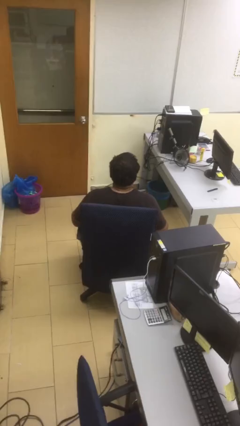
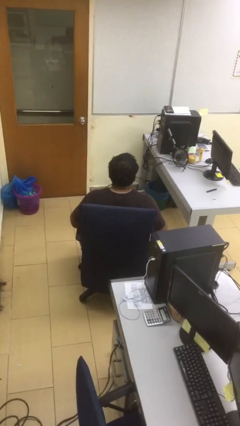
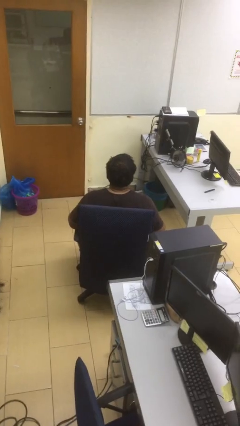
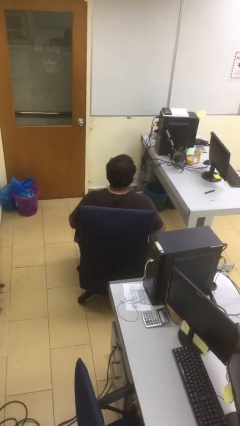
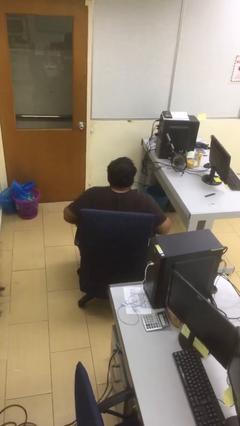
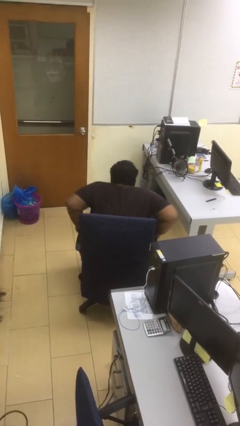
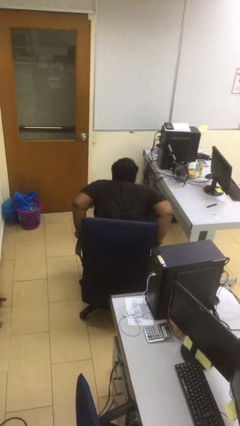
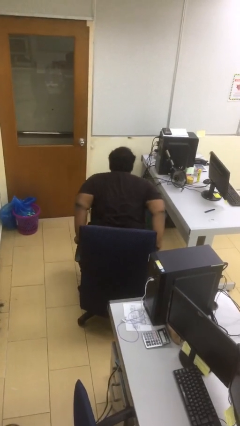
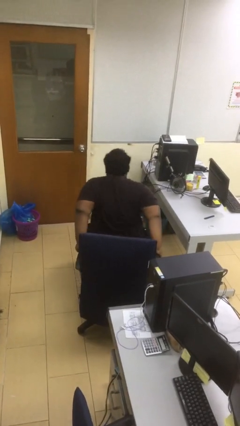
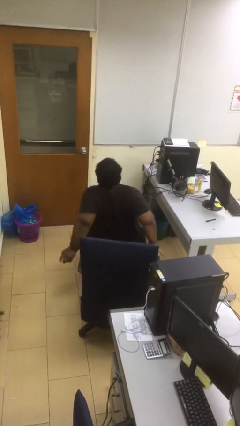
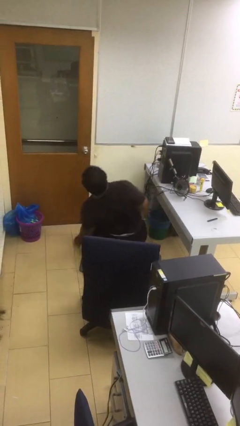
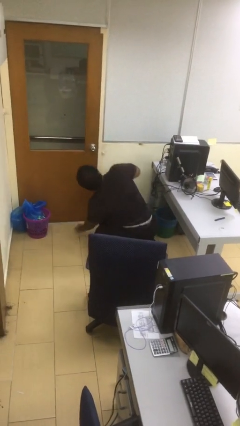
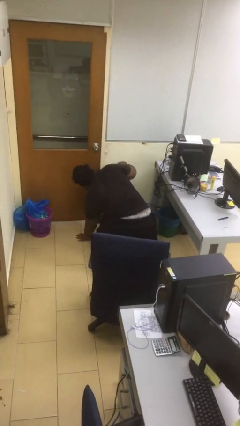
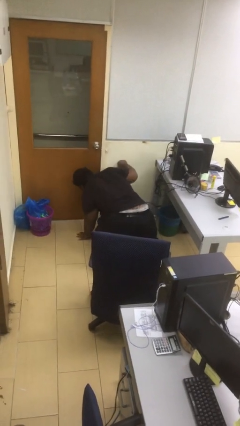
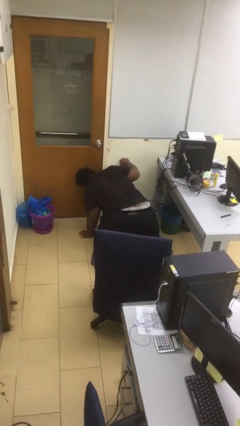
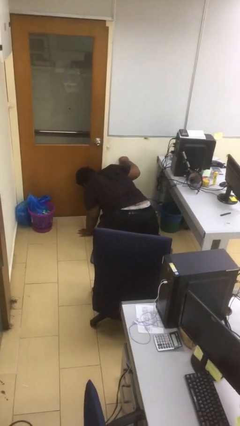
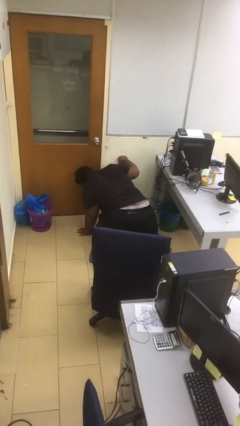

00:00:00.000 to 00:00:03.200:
person falls from chair

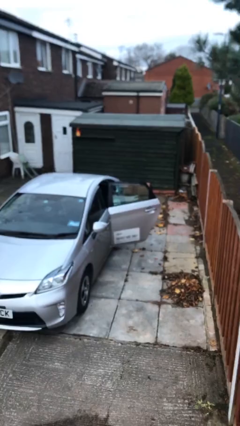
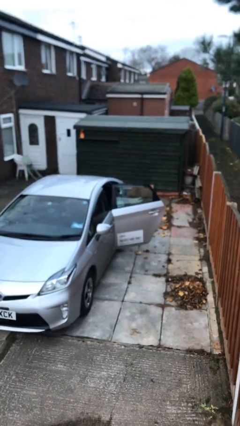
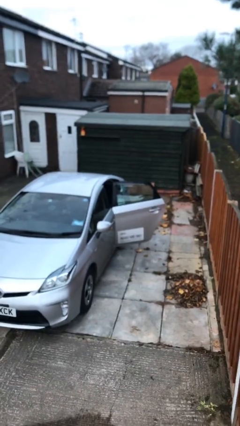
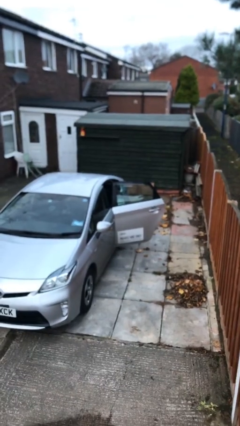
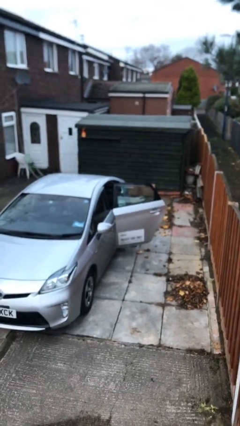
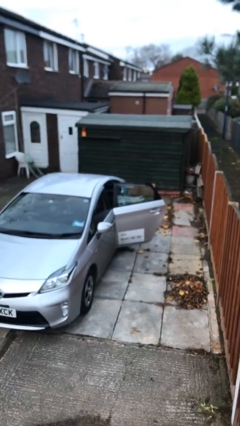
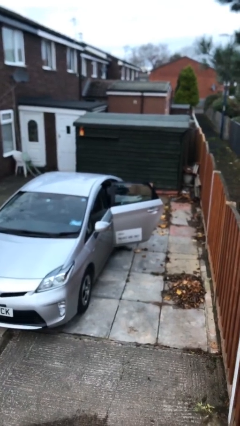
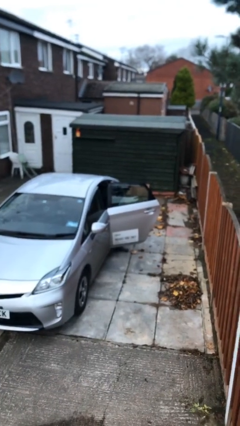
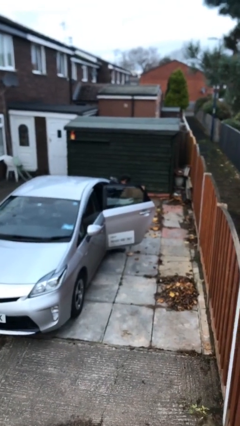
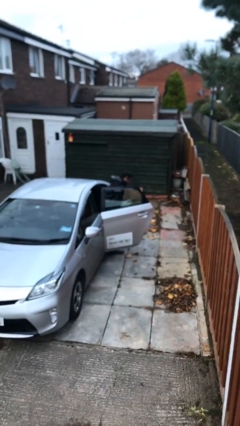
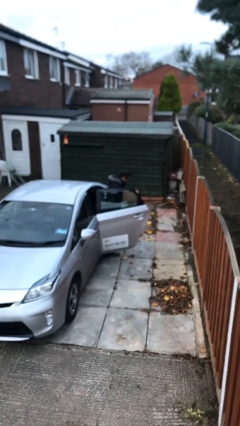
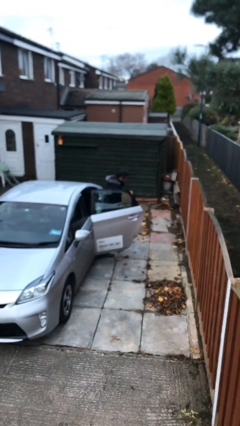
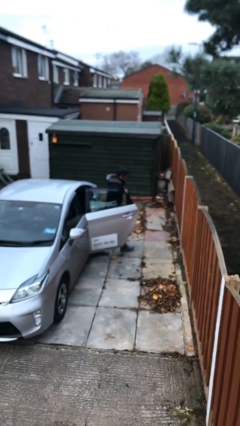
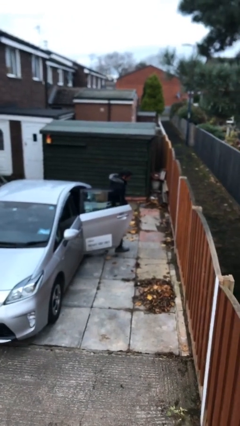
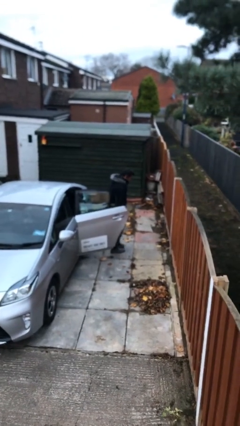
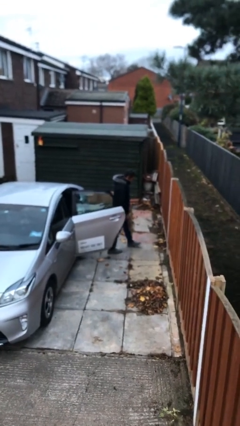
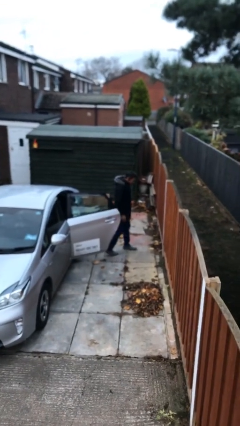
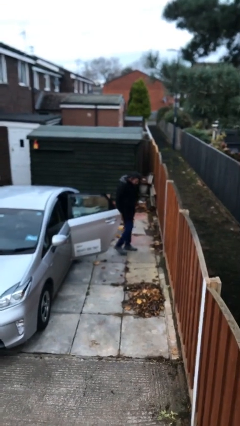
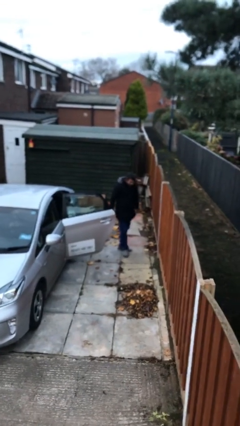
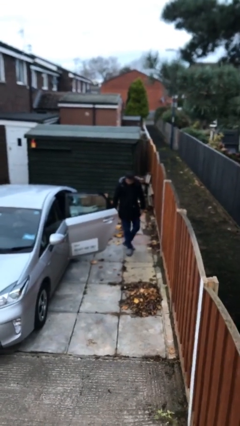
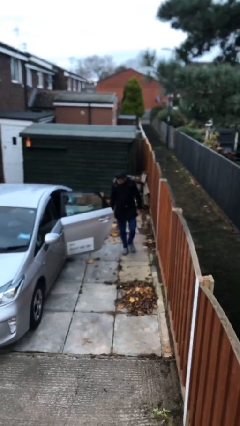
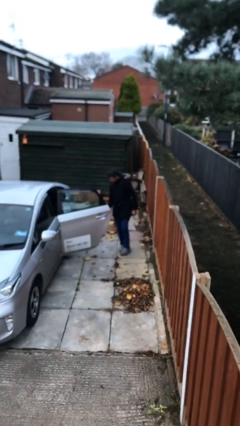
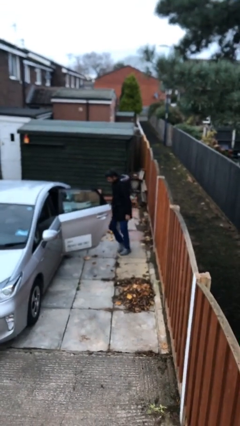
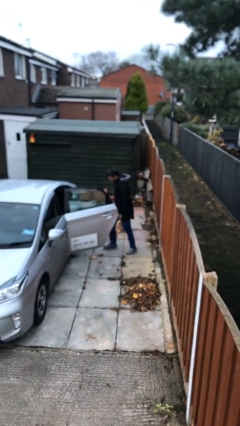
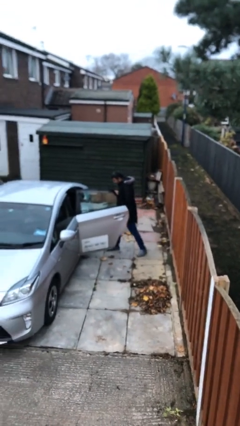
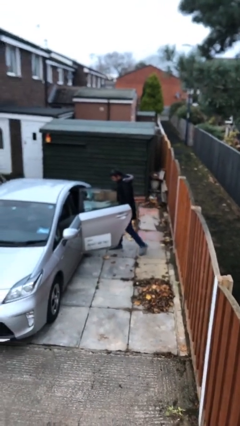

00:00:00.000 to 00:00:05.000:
person exits car

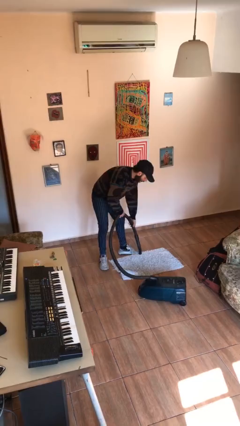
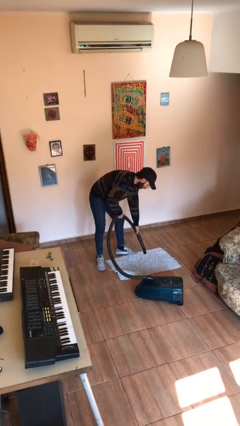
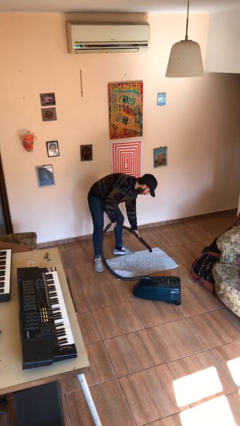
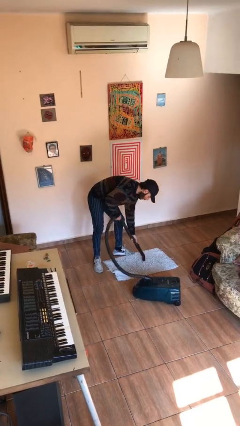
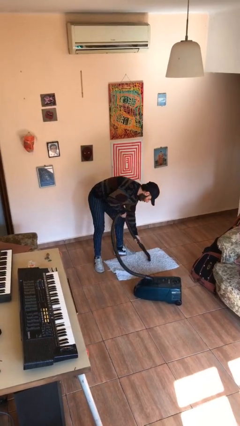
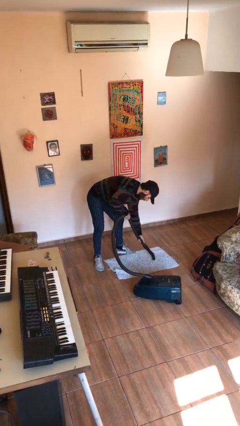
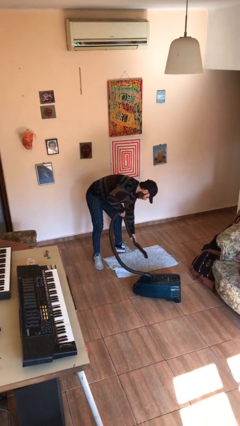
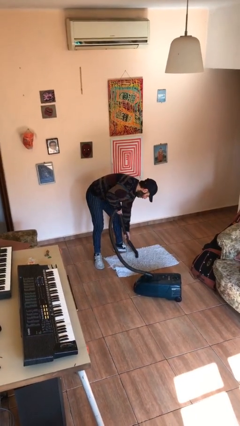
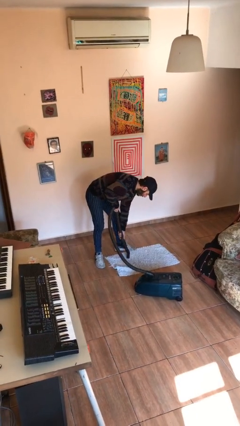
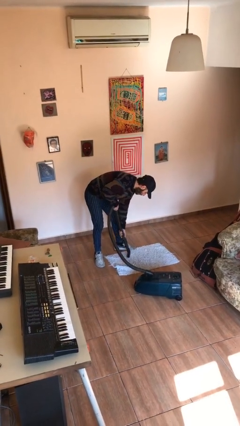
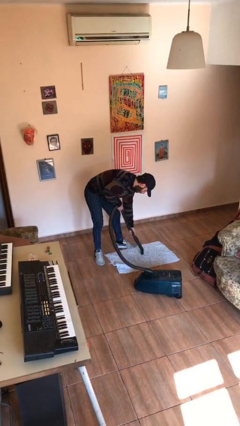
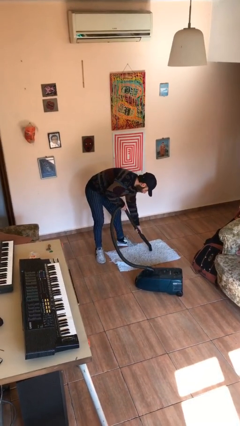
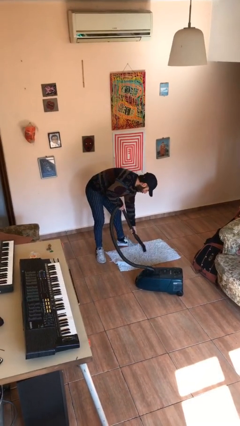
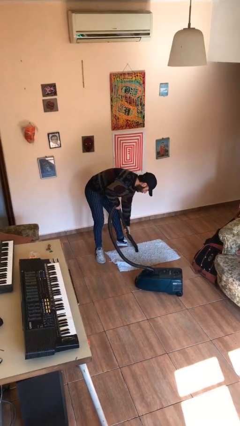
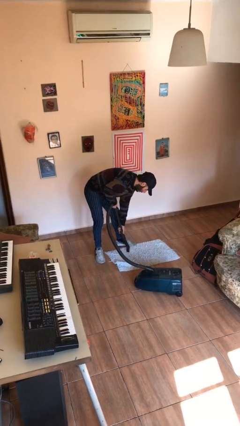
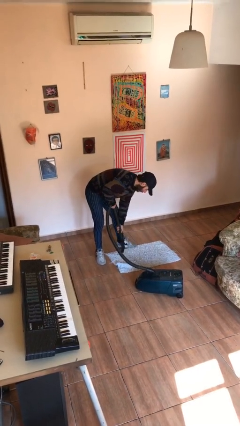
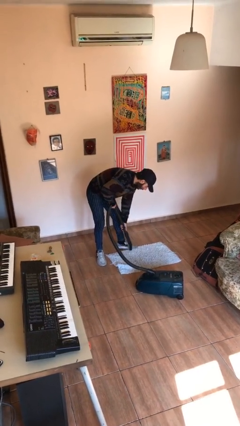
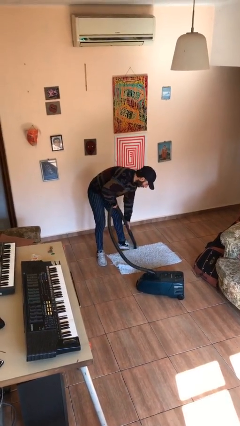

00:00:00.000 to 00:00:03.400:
person vacuums carpet

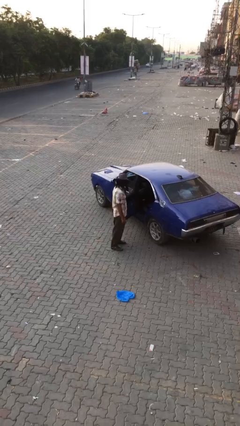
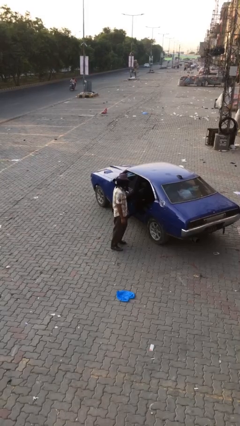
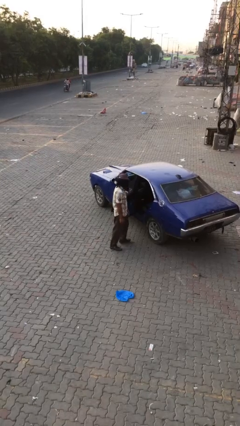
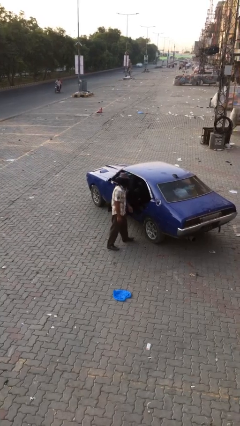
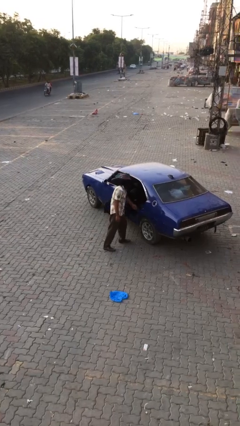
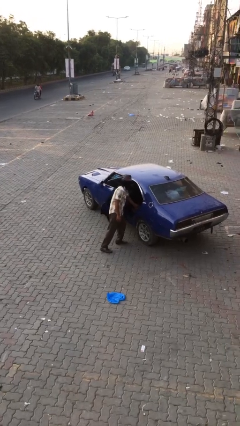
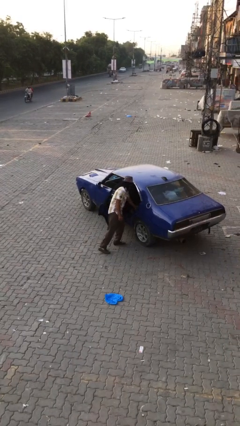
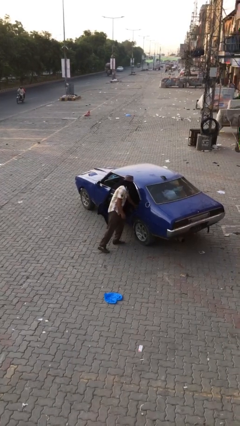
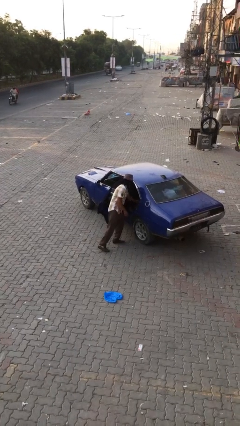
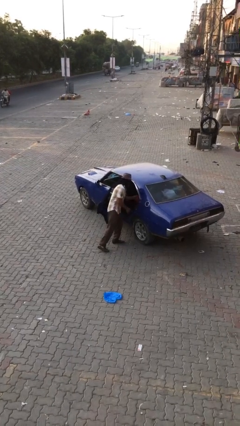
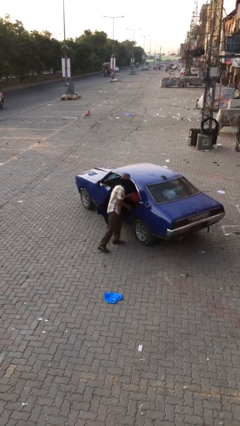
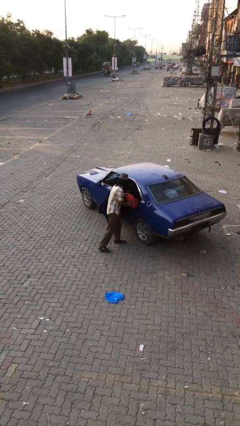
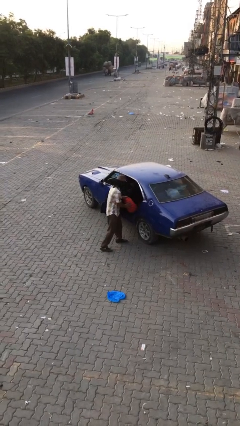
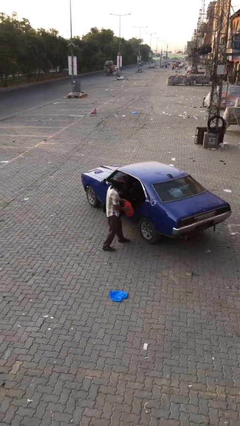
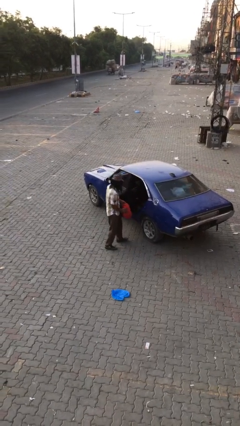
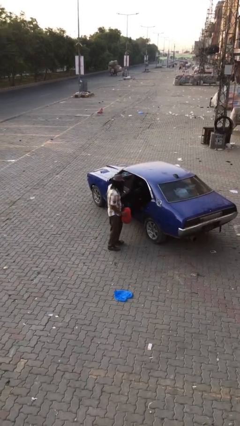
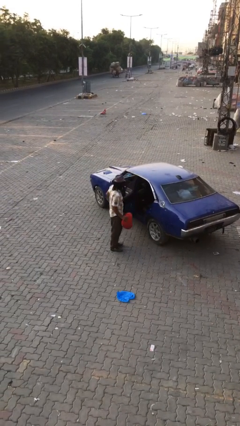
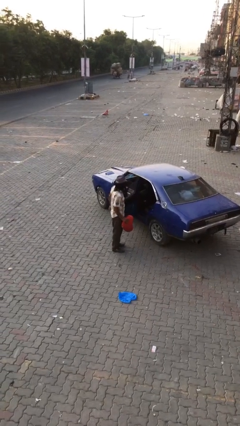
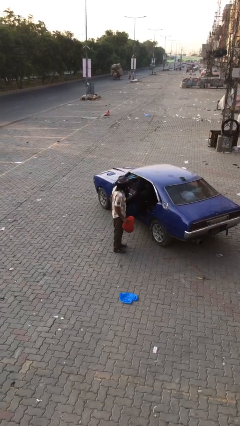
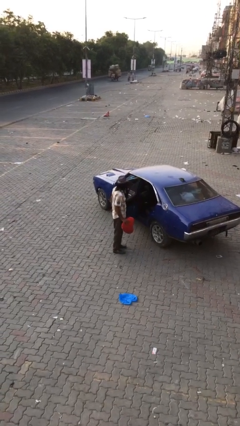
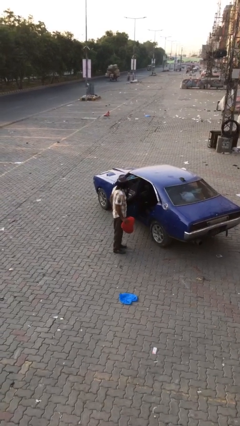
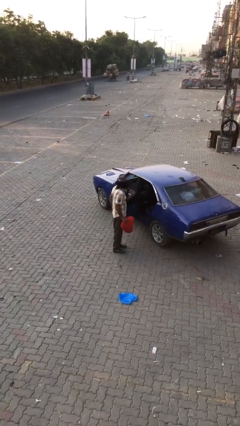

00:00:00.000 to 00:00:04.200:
person unloads car

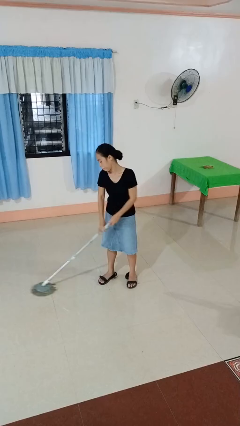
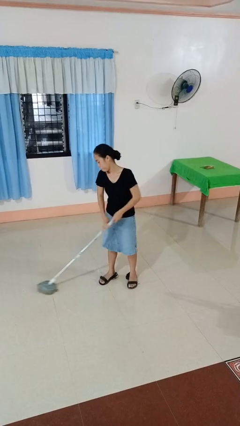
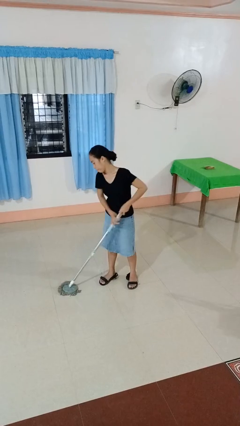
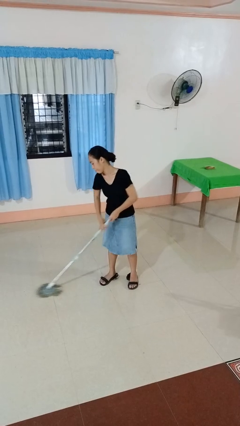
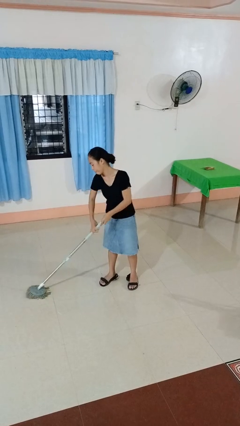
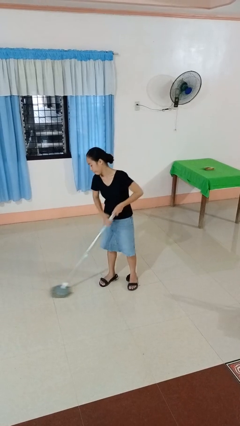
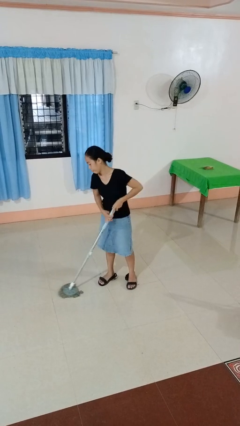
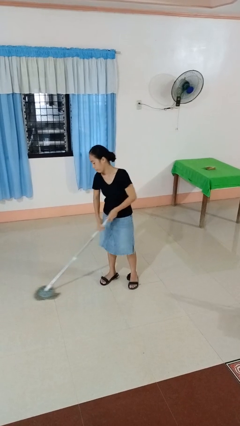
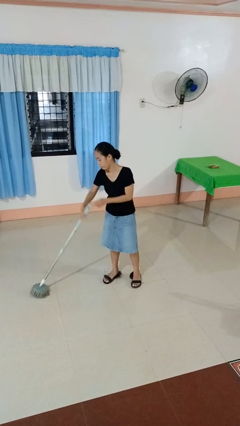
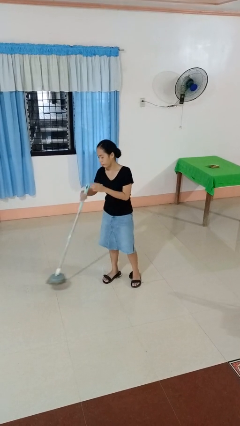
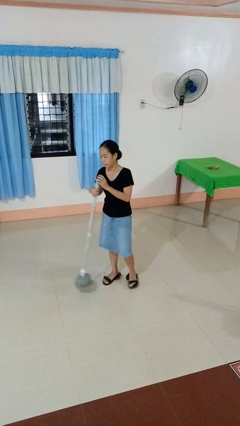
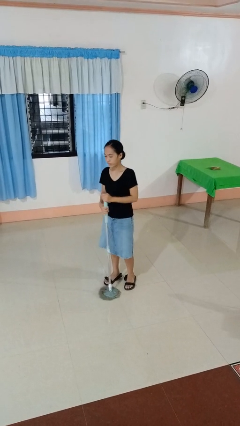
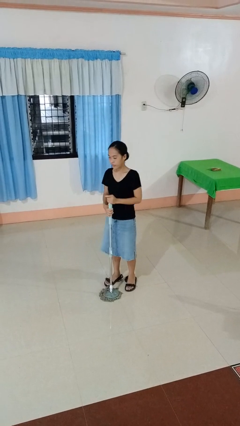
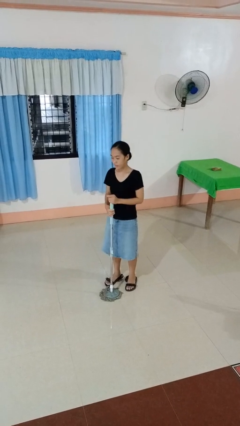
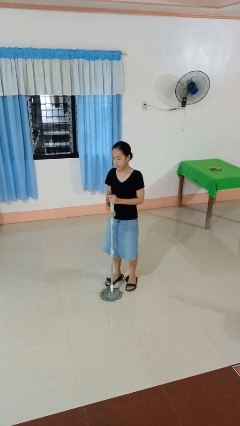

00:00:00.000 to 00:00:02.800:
person mops
